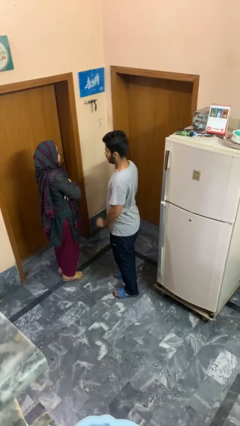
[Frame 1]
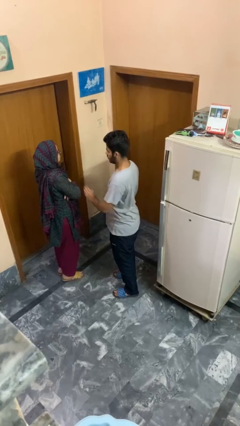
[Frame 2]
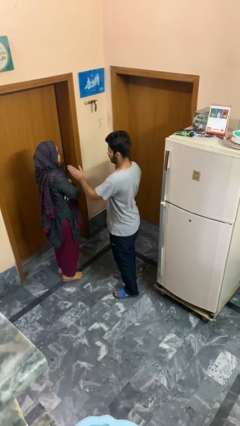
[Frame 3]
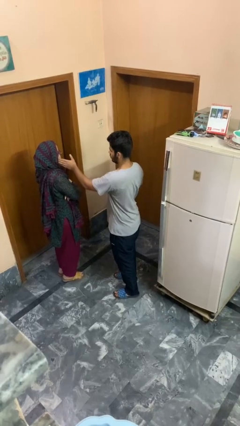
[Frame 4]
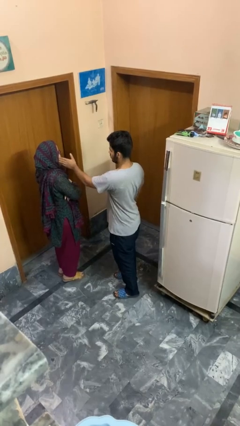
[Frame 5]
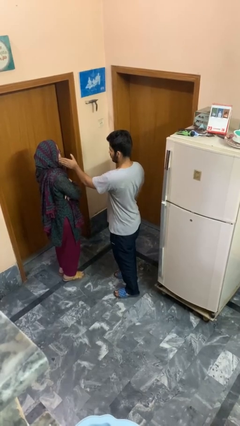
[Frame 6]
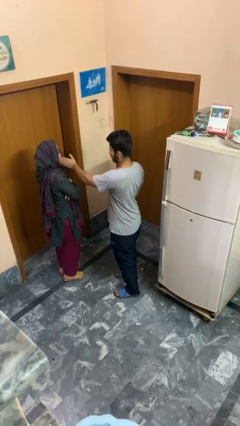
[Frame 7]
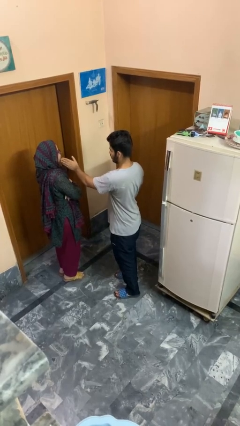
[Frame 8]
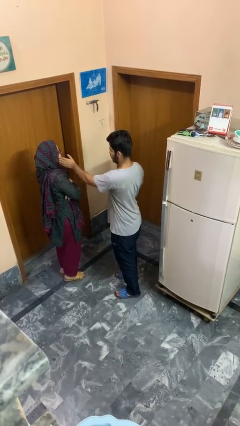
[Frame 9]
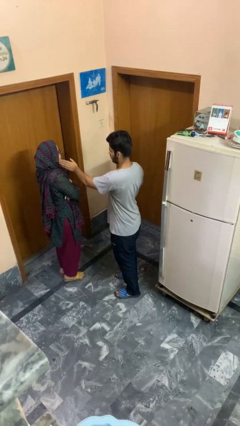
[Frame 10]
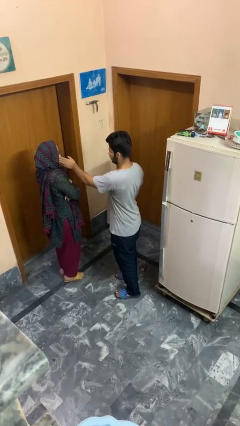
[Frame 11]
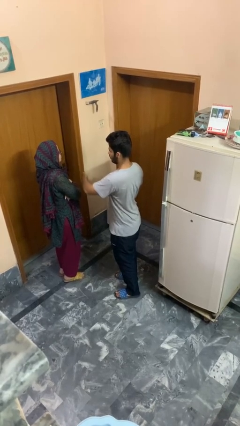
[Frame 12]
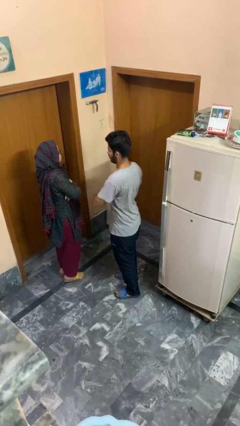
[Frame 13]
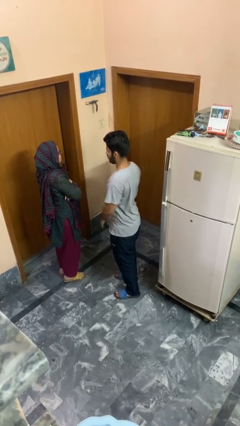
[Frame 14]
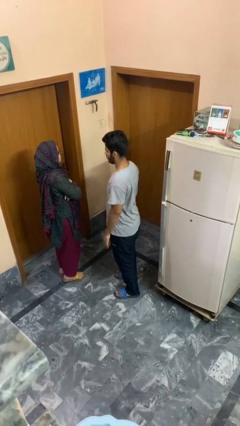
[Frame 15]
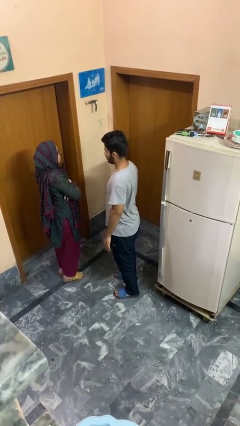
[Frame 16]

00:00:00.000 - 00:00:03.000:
person touches face of person

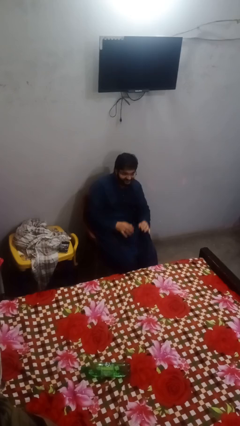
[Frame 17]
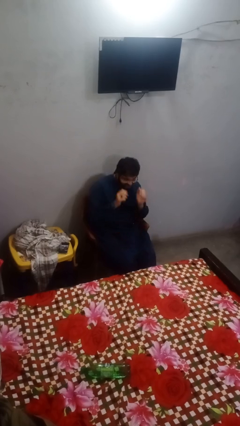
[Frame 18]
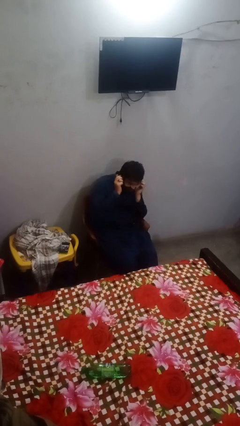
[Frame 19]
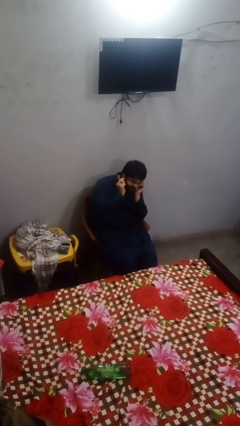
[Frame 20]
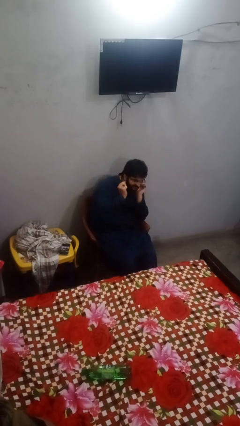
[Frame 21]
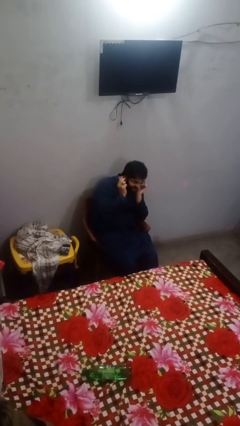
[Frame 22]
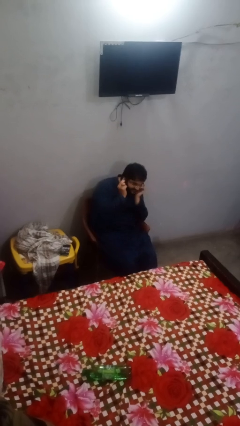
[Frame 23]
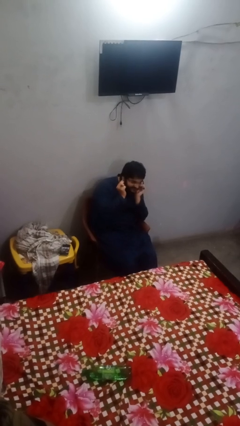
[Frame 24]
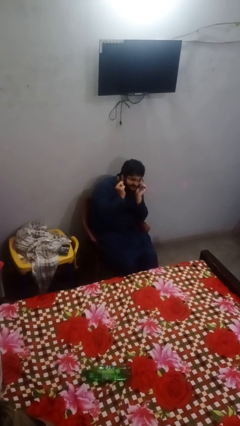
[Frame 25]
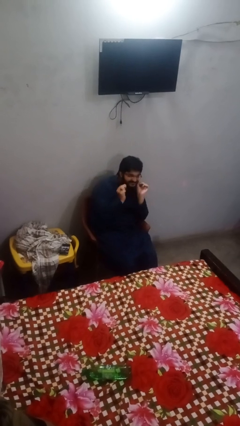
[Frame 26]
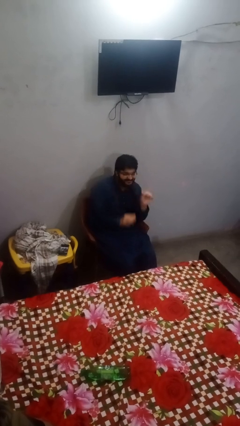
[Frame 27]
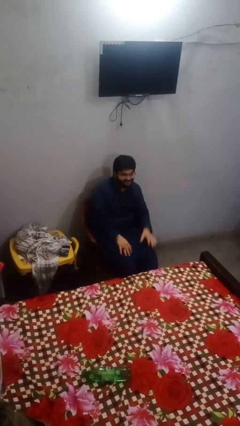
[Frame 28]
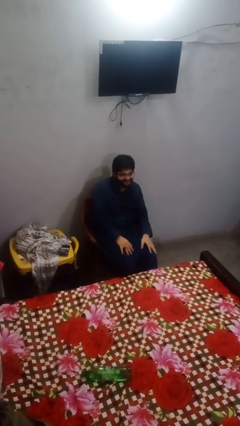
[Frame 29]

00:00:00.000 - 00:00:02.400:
person touches earlobe

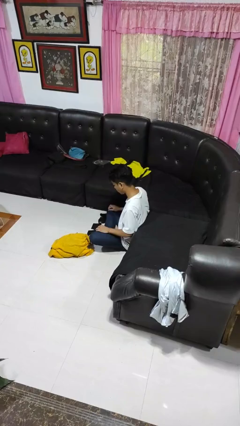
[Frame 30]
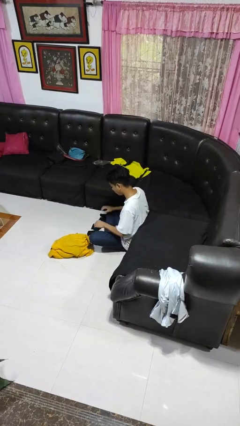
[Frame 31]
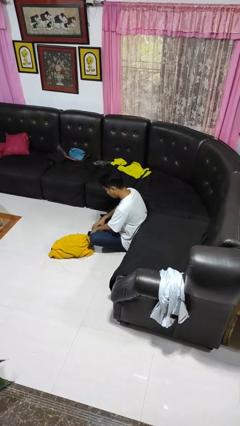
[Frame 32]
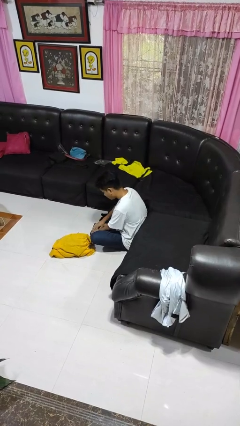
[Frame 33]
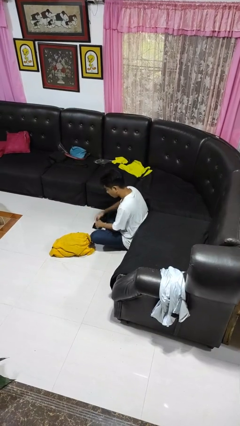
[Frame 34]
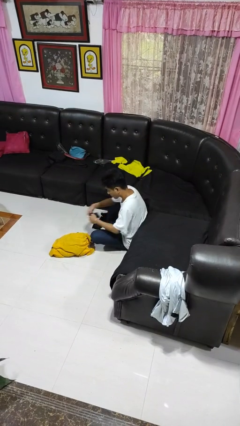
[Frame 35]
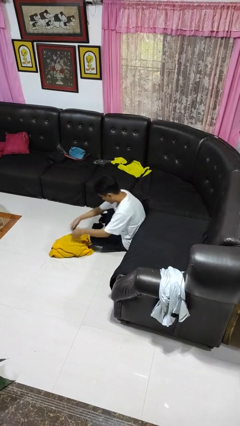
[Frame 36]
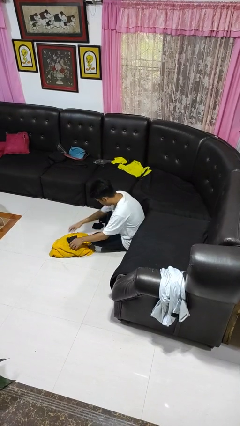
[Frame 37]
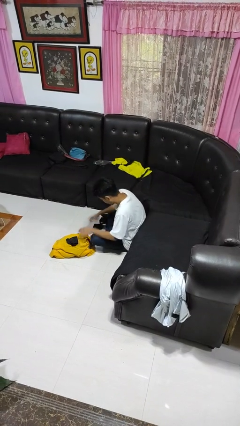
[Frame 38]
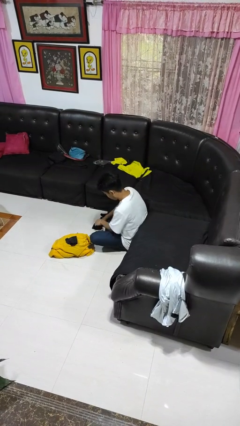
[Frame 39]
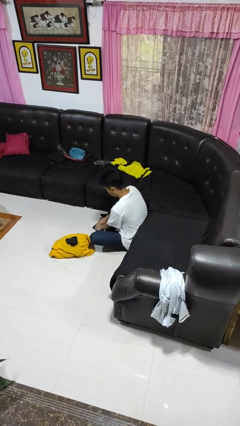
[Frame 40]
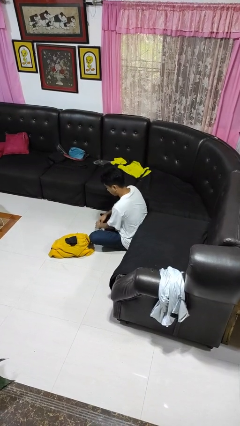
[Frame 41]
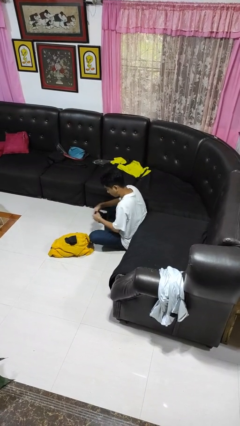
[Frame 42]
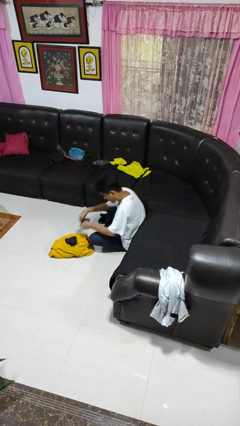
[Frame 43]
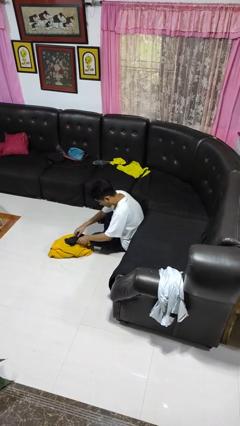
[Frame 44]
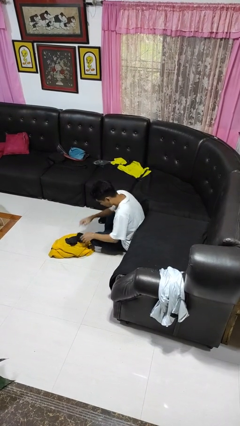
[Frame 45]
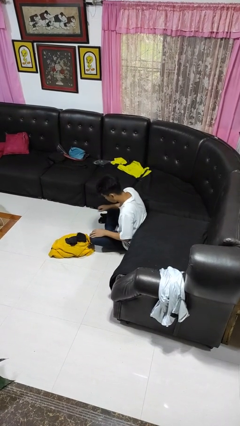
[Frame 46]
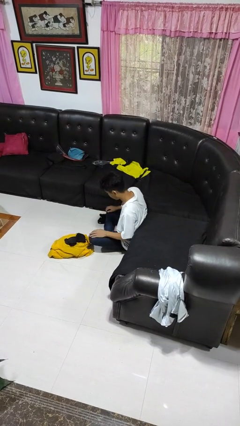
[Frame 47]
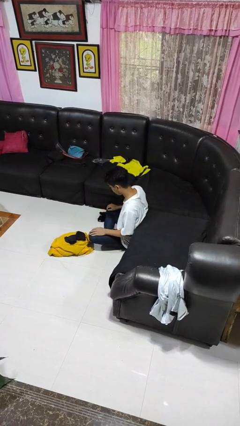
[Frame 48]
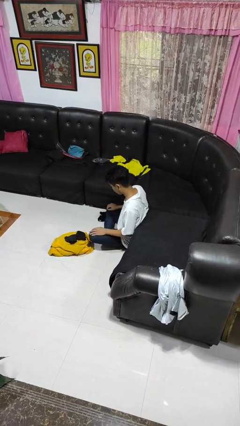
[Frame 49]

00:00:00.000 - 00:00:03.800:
person folds socks

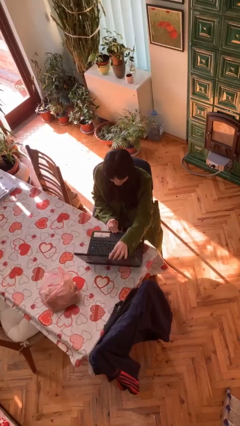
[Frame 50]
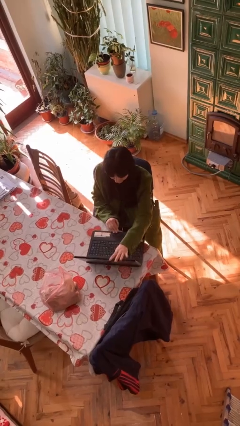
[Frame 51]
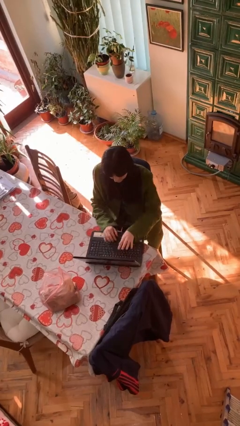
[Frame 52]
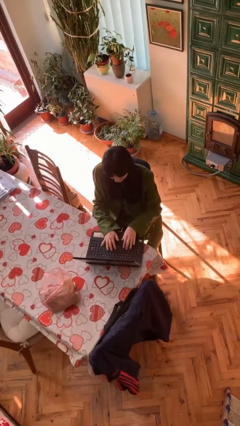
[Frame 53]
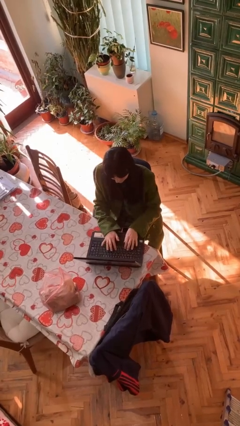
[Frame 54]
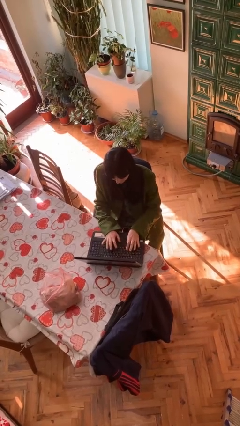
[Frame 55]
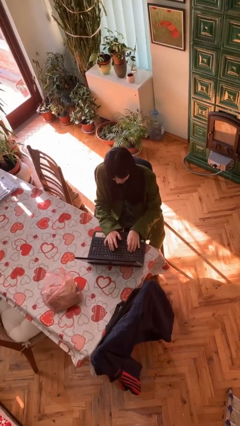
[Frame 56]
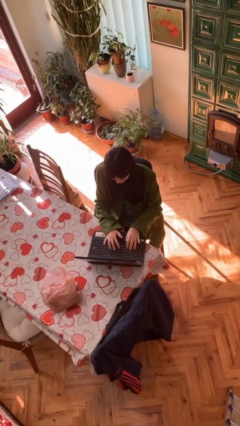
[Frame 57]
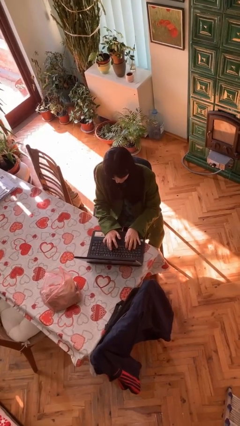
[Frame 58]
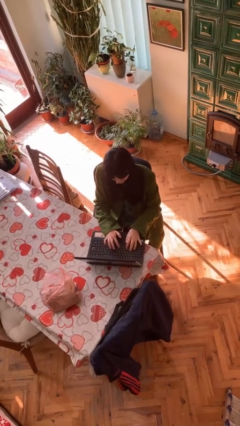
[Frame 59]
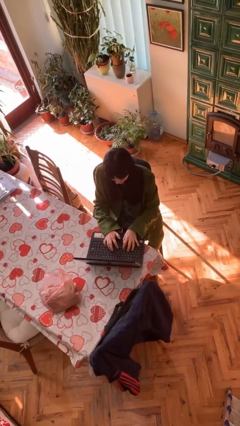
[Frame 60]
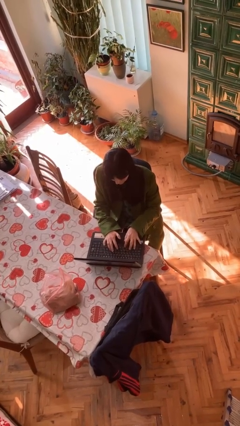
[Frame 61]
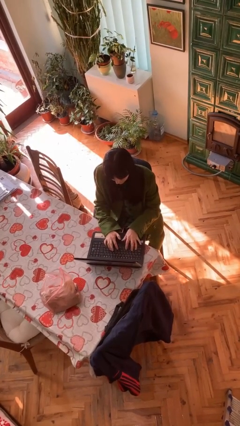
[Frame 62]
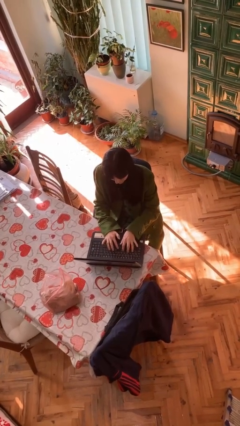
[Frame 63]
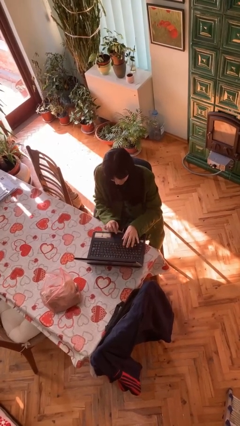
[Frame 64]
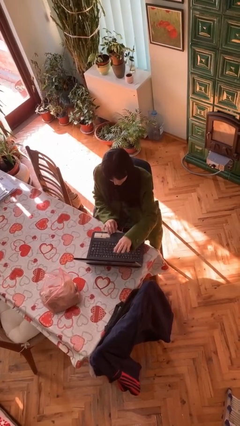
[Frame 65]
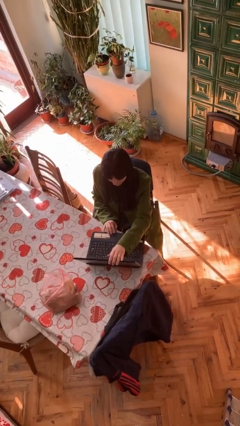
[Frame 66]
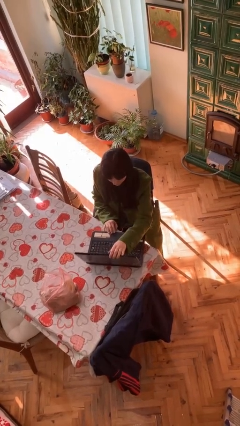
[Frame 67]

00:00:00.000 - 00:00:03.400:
person interacts with laptop

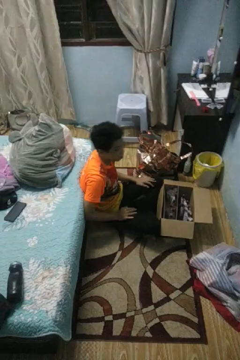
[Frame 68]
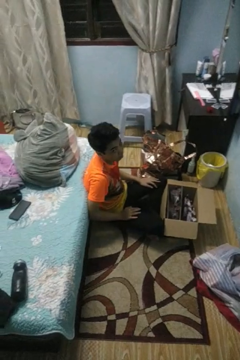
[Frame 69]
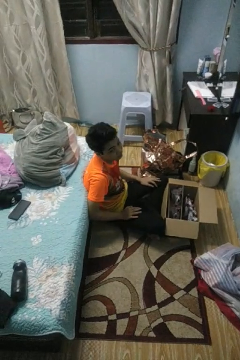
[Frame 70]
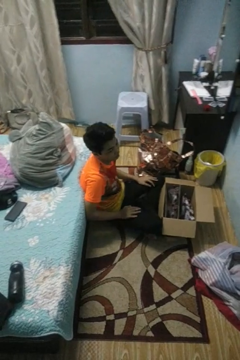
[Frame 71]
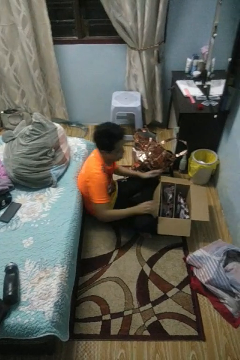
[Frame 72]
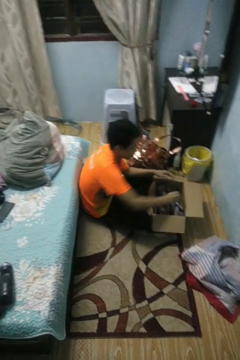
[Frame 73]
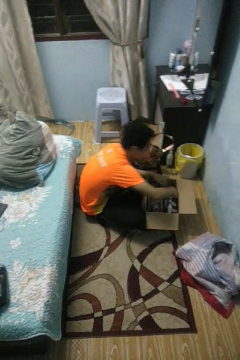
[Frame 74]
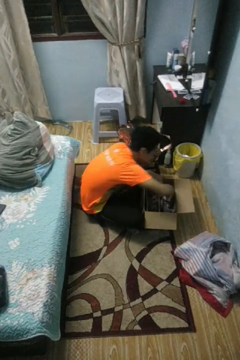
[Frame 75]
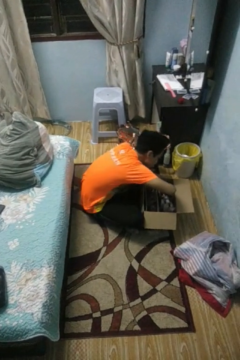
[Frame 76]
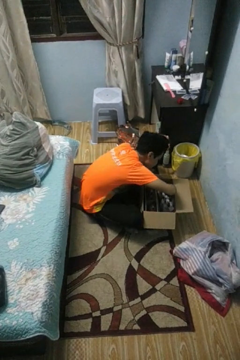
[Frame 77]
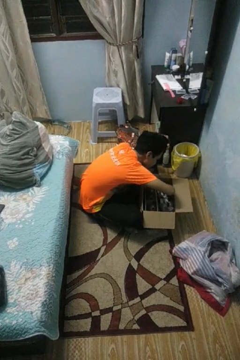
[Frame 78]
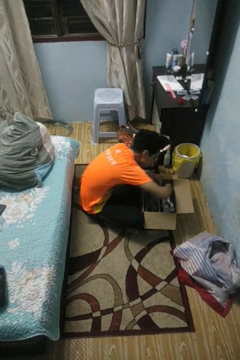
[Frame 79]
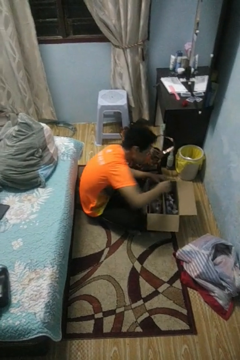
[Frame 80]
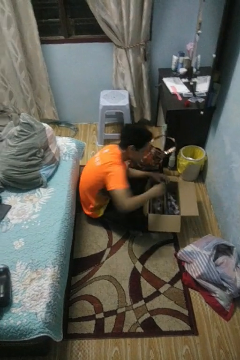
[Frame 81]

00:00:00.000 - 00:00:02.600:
person searches in box

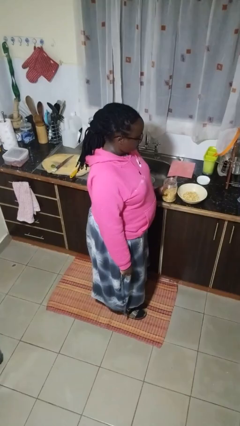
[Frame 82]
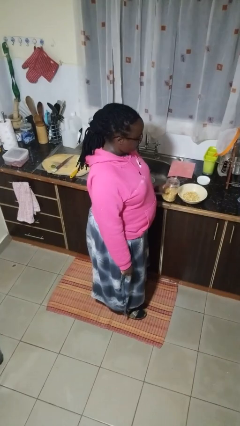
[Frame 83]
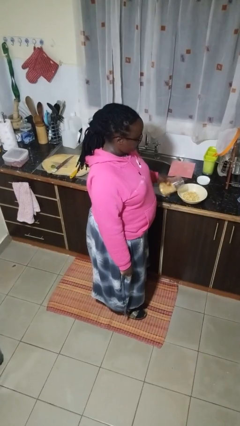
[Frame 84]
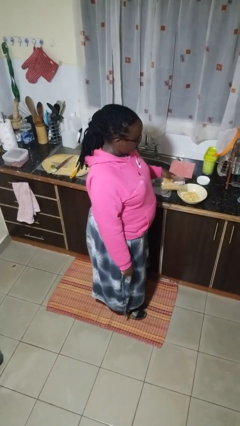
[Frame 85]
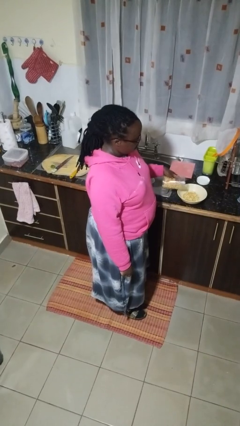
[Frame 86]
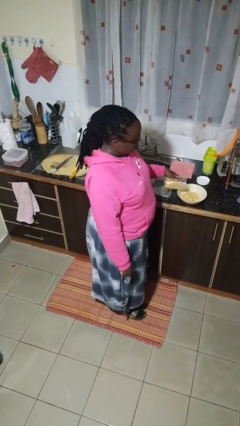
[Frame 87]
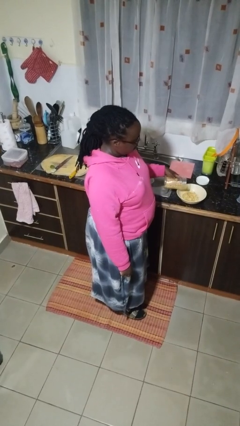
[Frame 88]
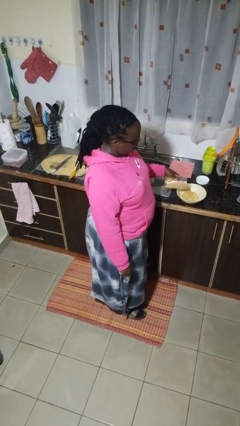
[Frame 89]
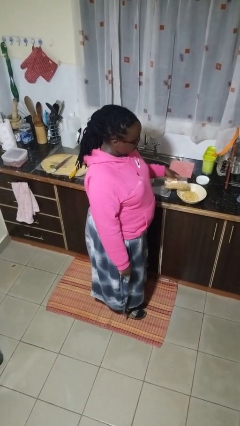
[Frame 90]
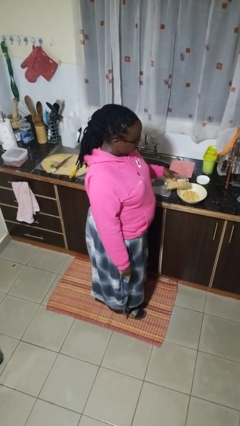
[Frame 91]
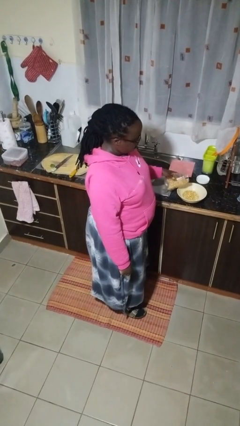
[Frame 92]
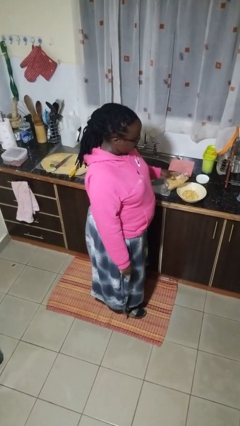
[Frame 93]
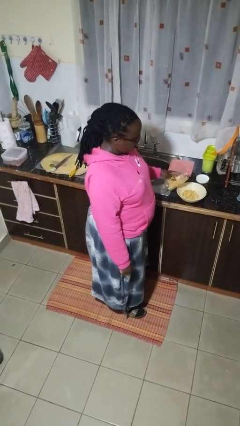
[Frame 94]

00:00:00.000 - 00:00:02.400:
person pours into bowl

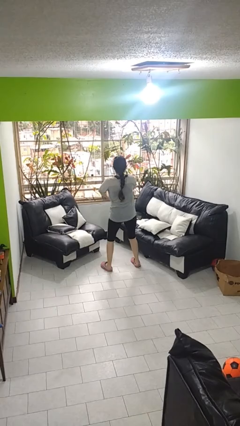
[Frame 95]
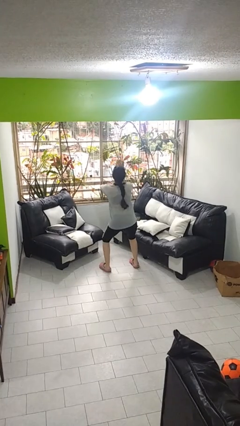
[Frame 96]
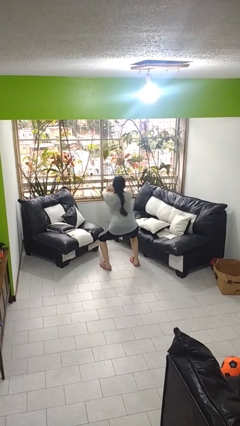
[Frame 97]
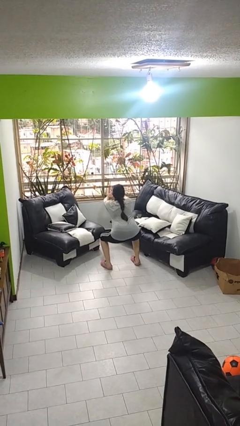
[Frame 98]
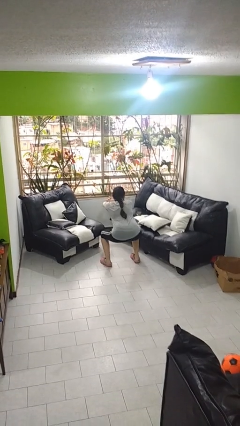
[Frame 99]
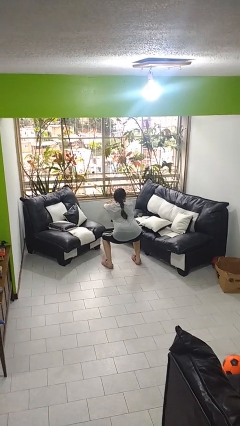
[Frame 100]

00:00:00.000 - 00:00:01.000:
person squats
